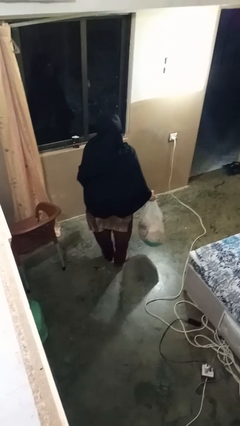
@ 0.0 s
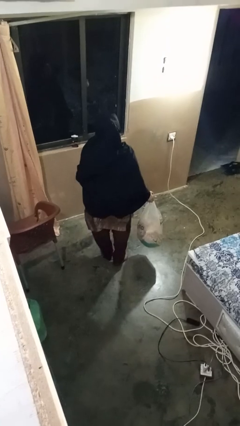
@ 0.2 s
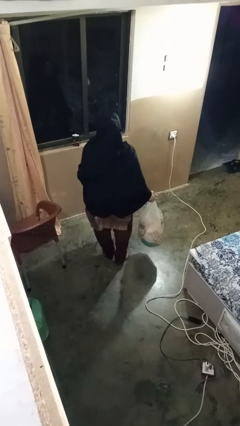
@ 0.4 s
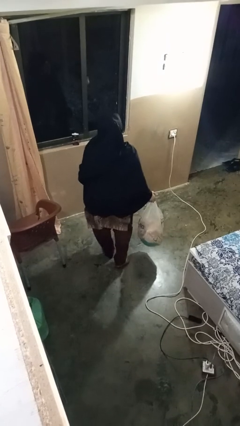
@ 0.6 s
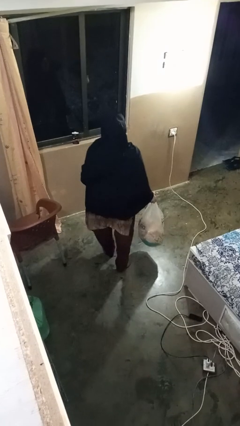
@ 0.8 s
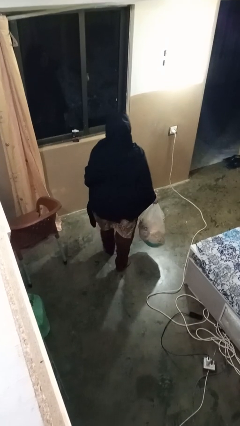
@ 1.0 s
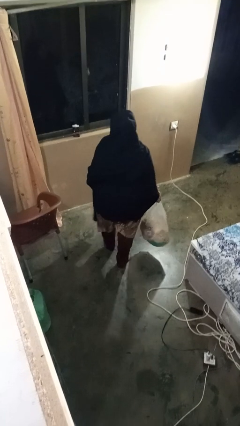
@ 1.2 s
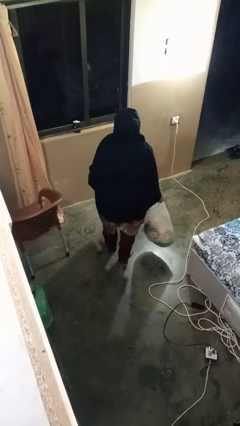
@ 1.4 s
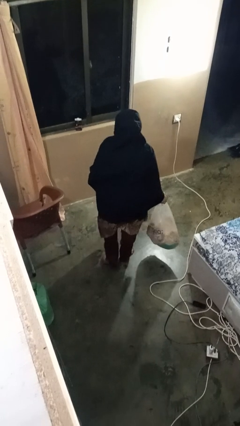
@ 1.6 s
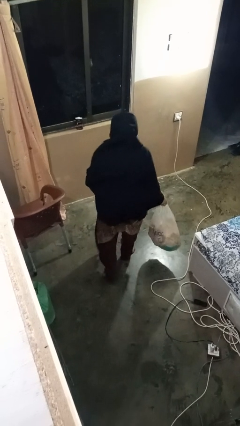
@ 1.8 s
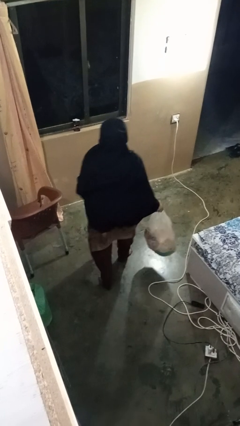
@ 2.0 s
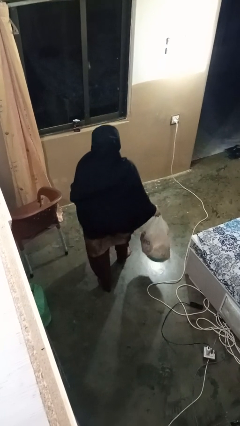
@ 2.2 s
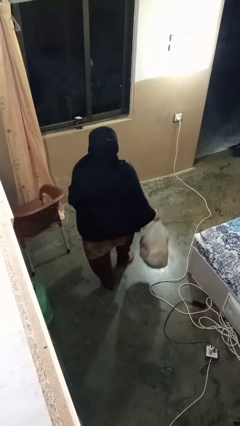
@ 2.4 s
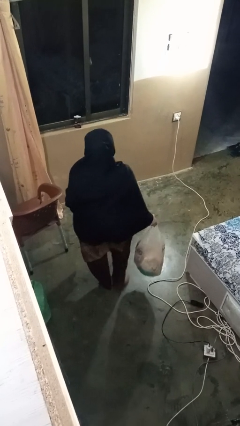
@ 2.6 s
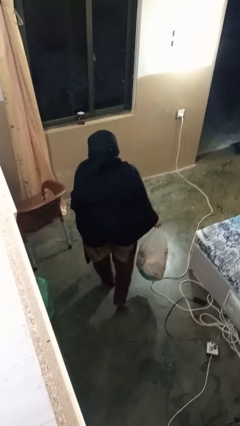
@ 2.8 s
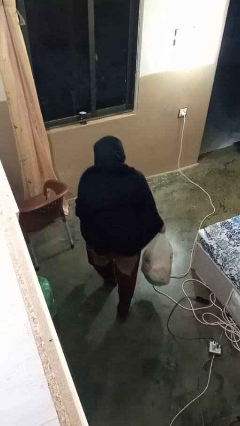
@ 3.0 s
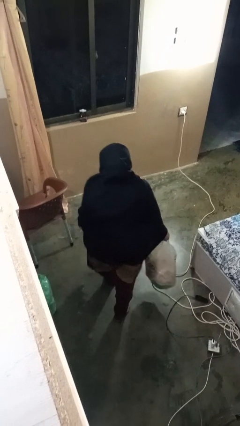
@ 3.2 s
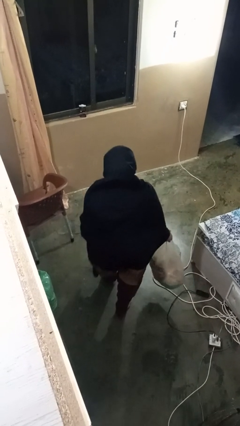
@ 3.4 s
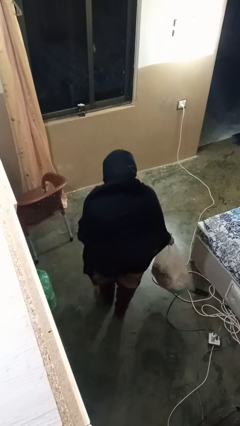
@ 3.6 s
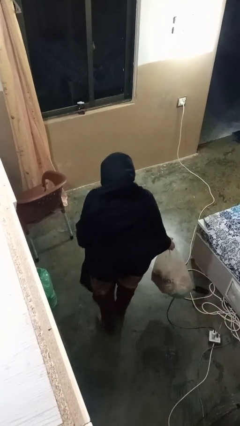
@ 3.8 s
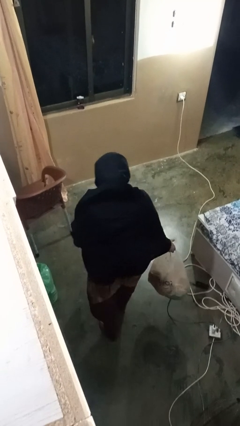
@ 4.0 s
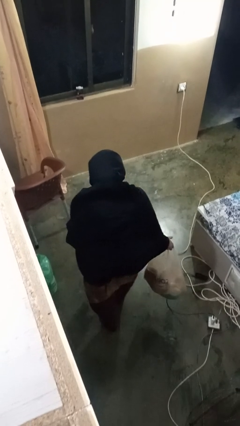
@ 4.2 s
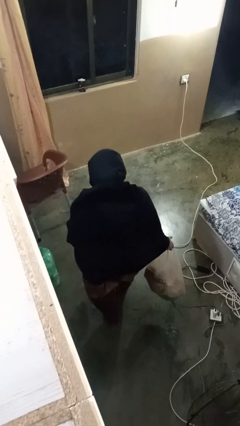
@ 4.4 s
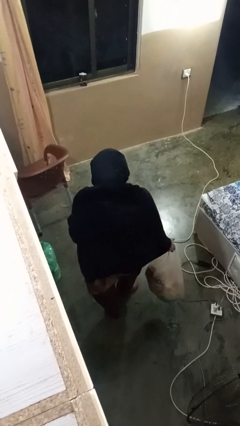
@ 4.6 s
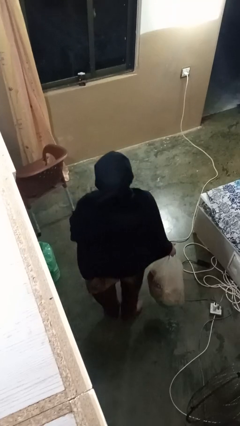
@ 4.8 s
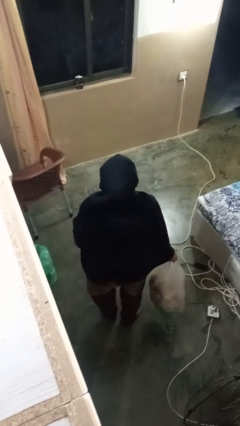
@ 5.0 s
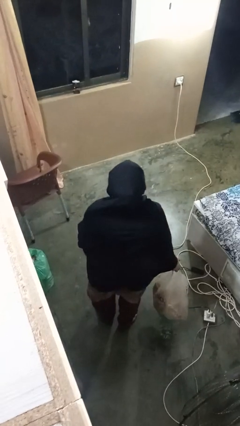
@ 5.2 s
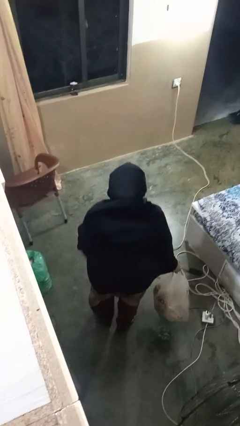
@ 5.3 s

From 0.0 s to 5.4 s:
person carries groceries

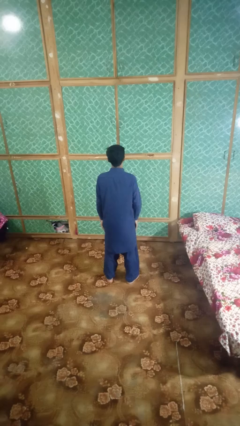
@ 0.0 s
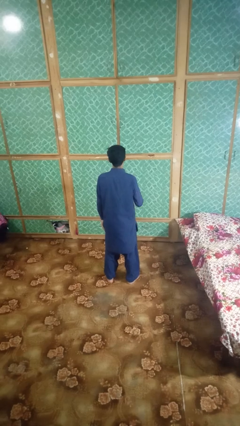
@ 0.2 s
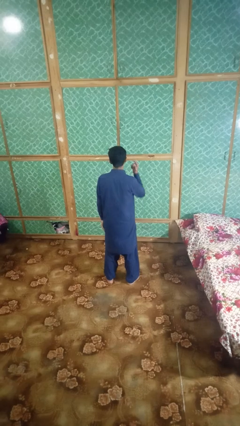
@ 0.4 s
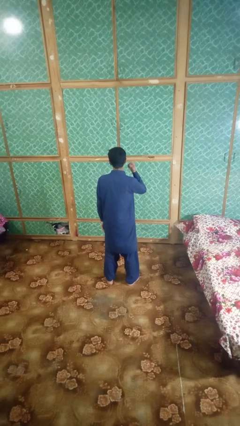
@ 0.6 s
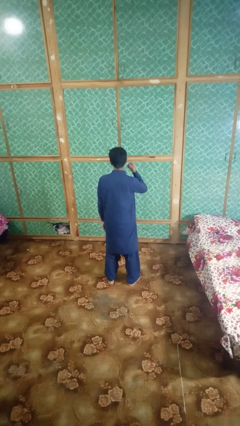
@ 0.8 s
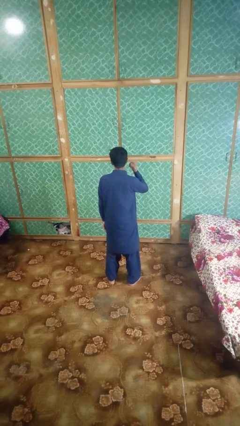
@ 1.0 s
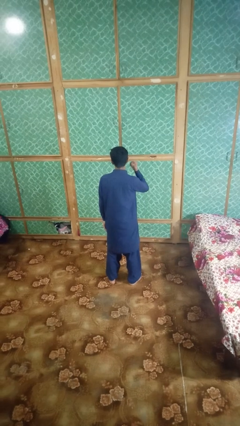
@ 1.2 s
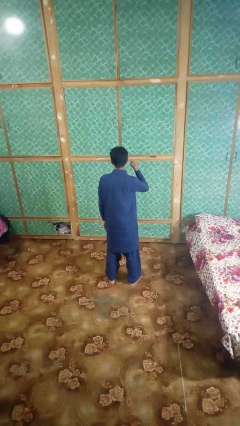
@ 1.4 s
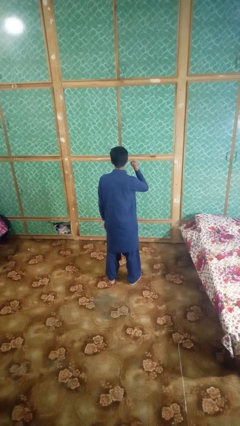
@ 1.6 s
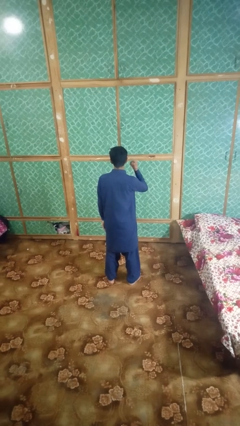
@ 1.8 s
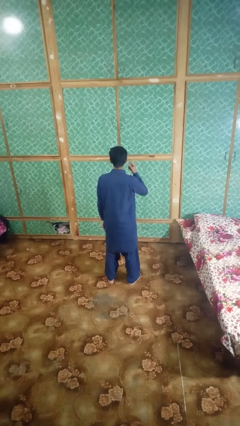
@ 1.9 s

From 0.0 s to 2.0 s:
person gestures listen closely

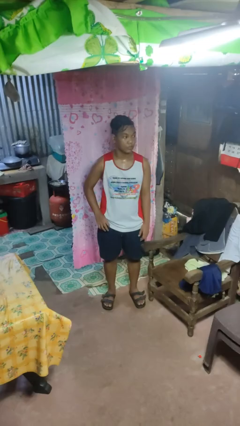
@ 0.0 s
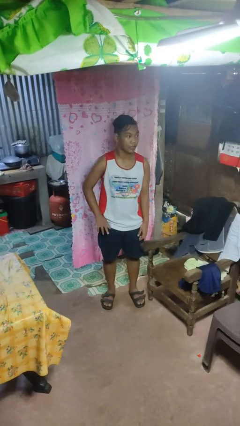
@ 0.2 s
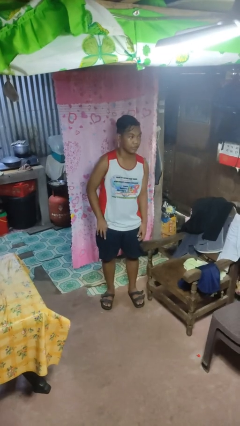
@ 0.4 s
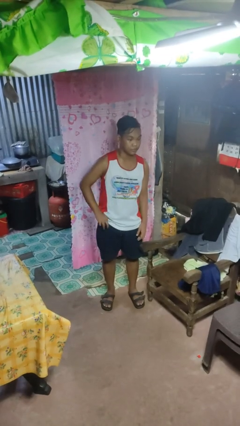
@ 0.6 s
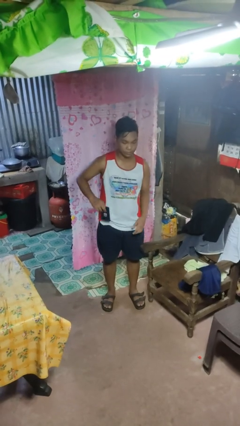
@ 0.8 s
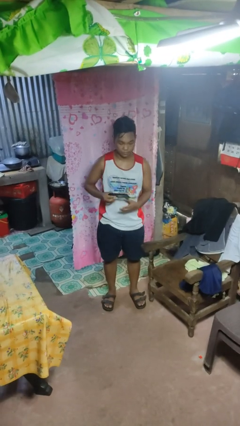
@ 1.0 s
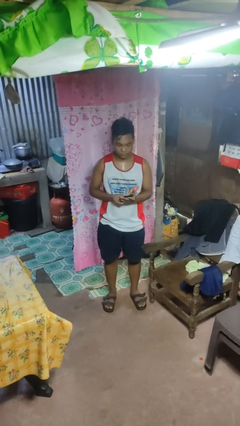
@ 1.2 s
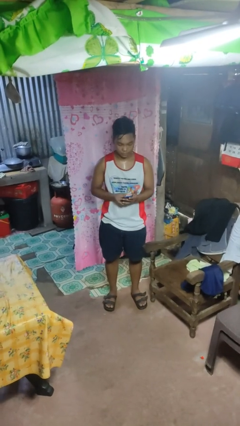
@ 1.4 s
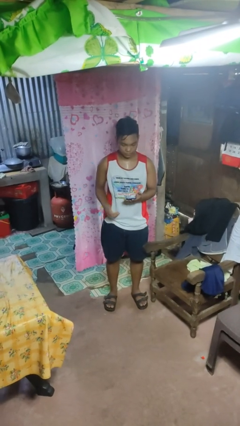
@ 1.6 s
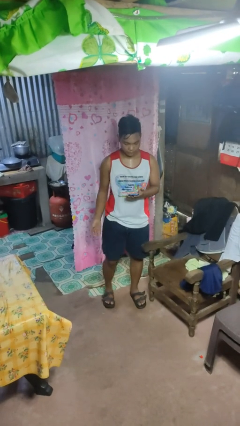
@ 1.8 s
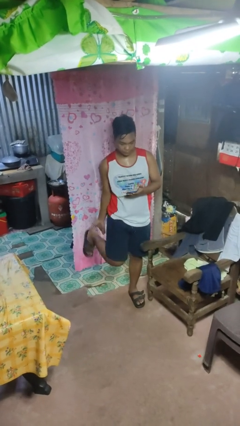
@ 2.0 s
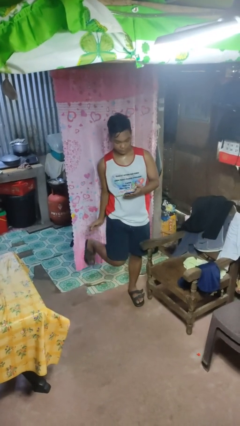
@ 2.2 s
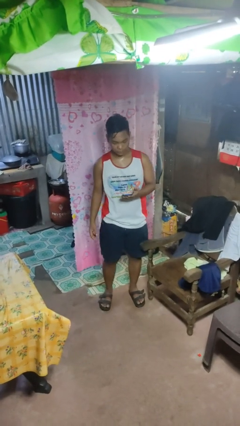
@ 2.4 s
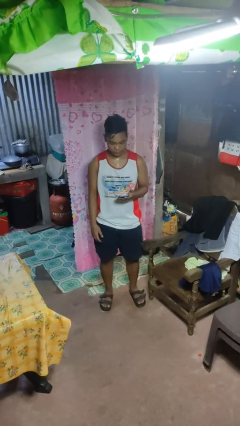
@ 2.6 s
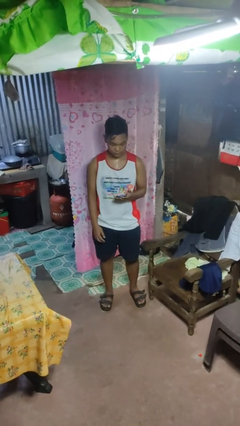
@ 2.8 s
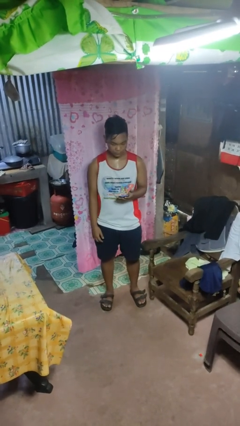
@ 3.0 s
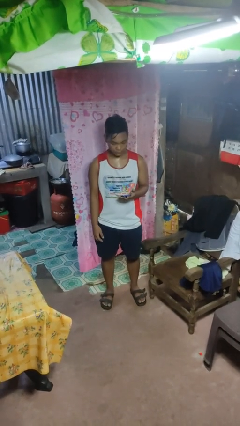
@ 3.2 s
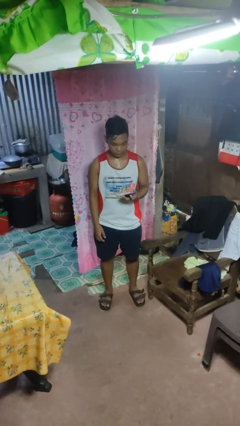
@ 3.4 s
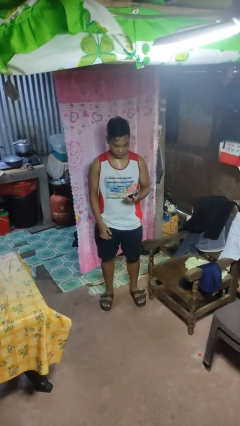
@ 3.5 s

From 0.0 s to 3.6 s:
person takes phone from pocket

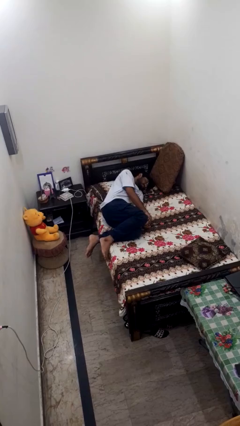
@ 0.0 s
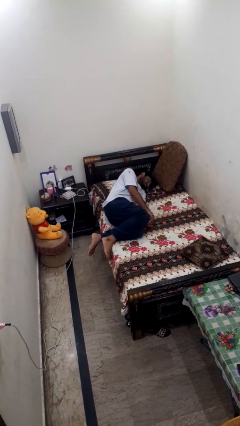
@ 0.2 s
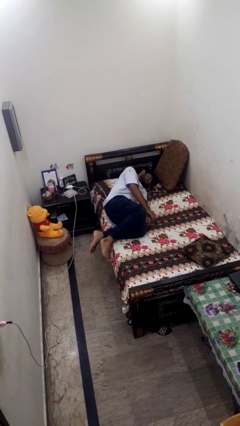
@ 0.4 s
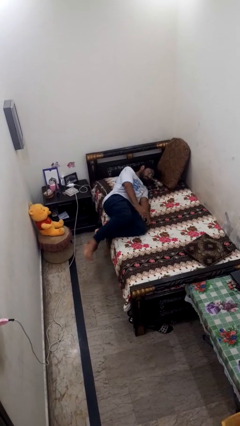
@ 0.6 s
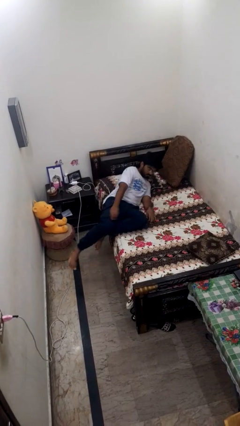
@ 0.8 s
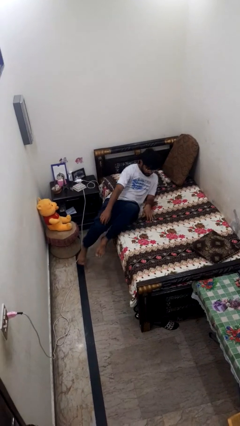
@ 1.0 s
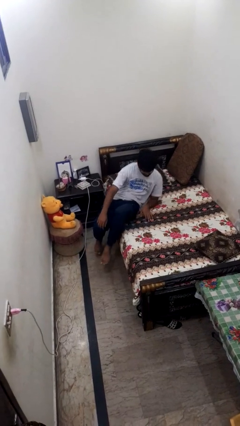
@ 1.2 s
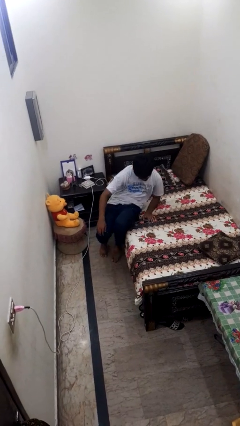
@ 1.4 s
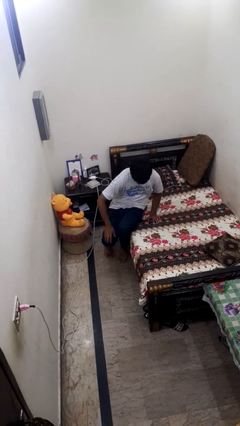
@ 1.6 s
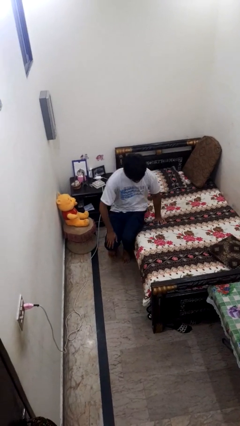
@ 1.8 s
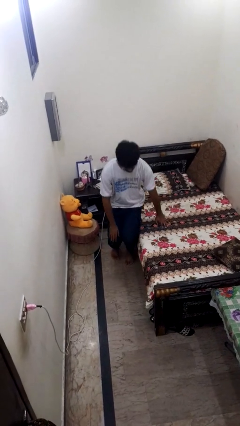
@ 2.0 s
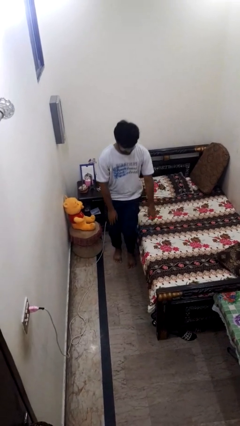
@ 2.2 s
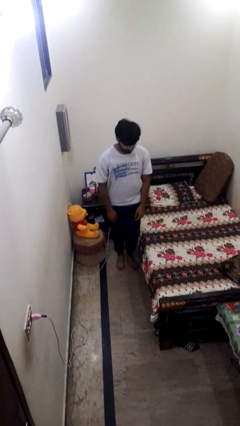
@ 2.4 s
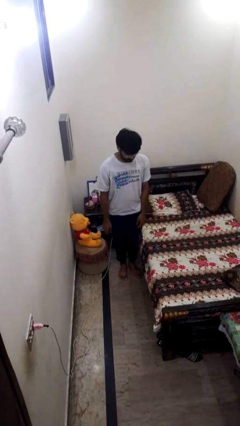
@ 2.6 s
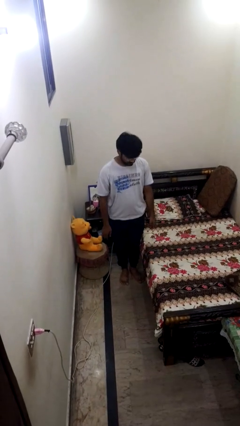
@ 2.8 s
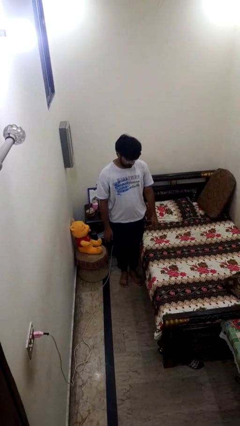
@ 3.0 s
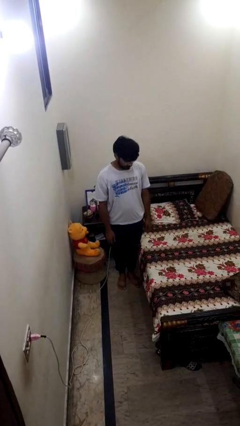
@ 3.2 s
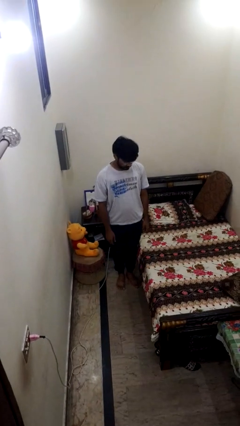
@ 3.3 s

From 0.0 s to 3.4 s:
person stands up

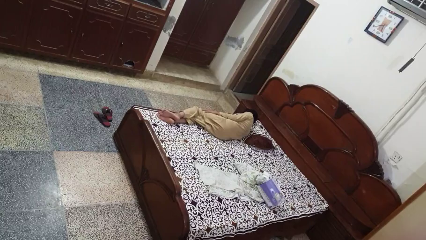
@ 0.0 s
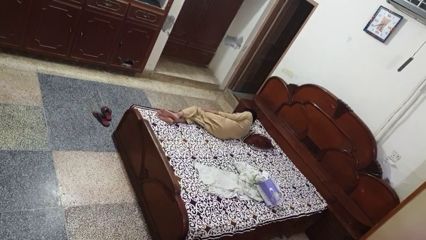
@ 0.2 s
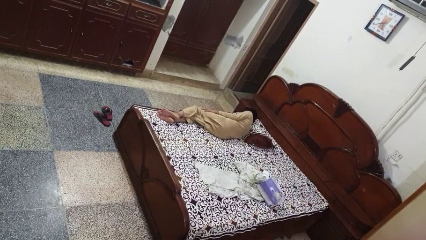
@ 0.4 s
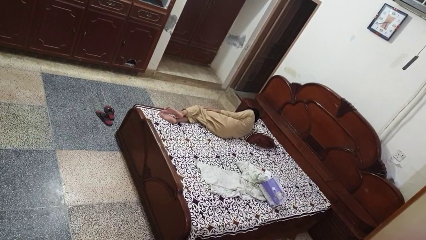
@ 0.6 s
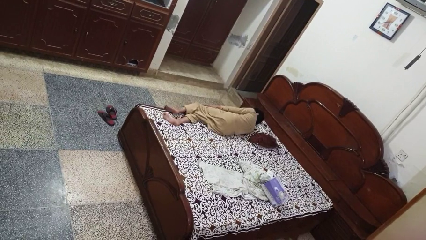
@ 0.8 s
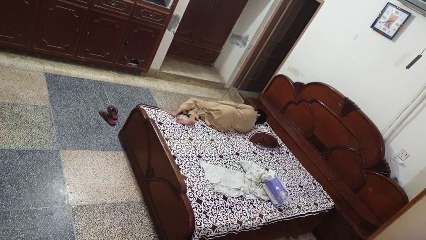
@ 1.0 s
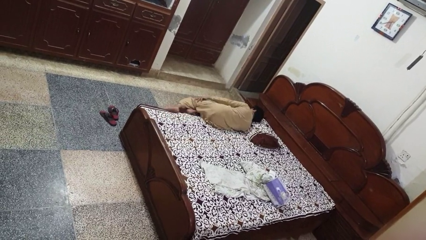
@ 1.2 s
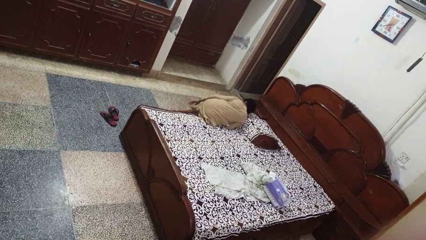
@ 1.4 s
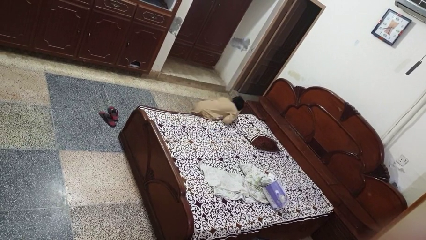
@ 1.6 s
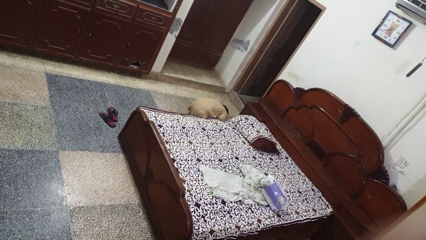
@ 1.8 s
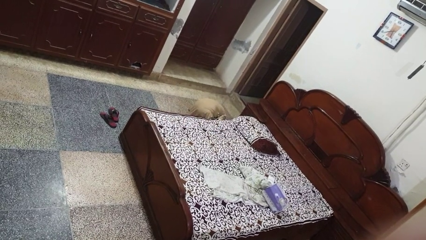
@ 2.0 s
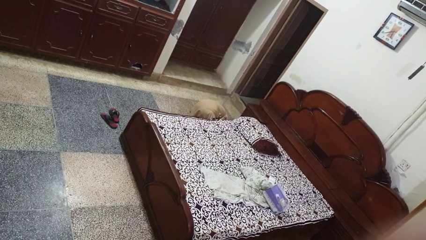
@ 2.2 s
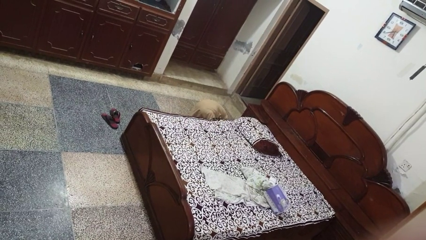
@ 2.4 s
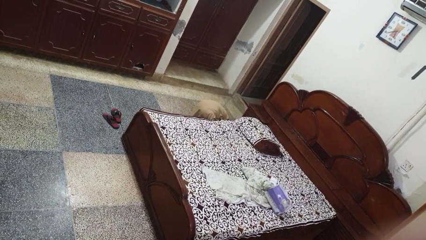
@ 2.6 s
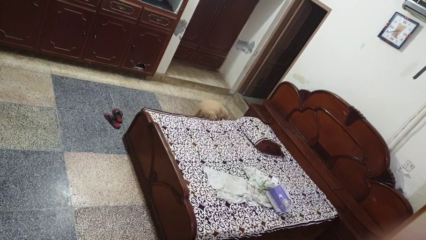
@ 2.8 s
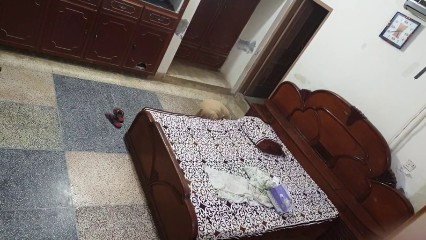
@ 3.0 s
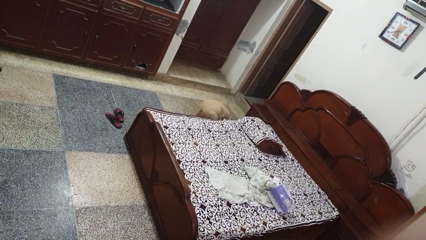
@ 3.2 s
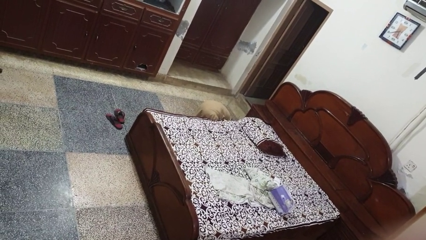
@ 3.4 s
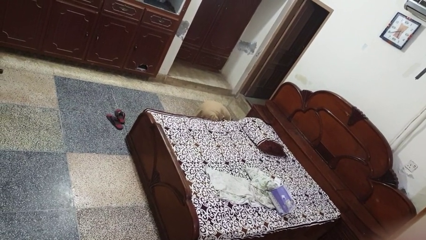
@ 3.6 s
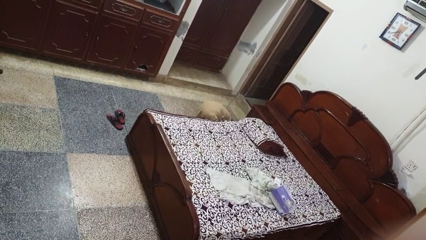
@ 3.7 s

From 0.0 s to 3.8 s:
person falls from bed
